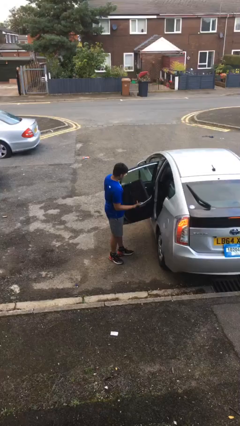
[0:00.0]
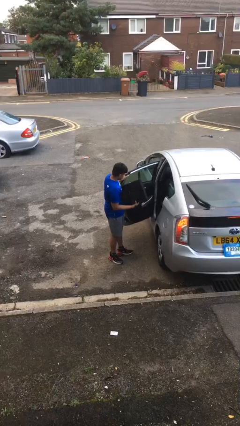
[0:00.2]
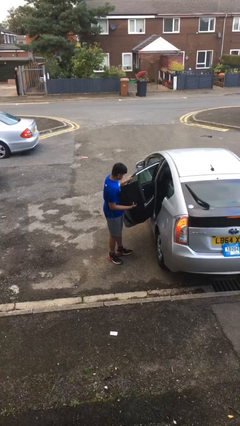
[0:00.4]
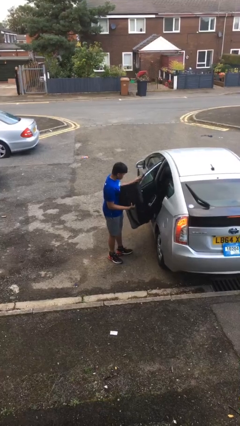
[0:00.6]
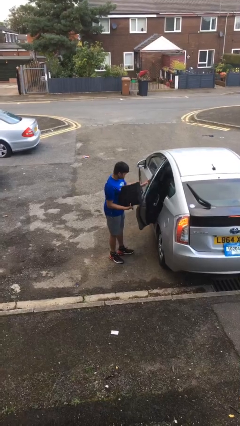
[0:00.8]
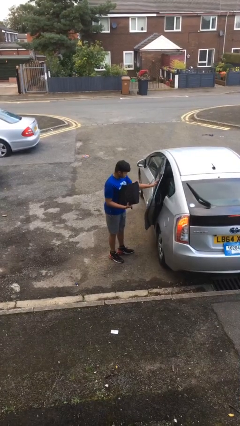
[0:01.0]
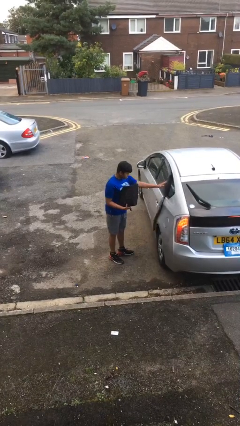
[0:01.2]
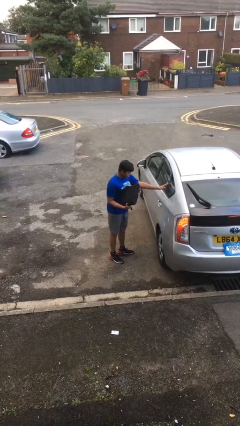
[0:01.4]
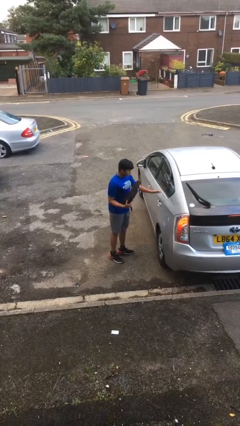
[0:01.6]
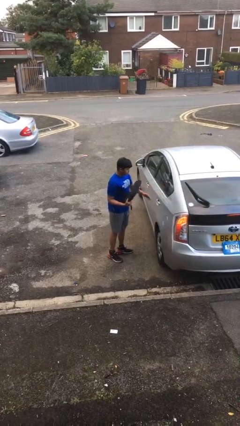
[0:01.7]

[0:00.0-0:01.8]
person closes car door

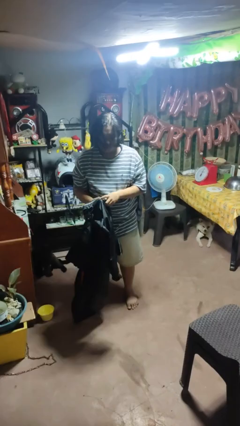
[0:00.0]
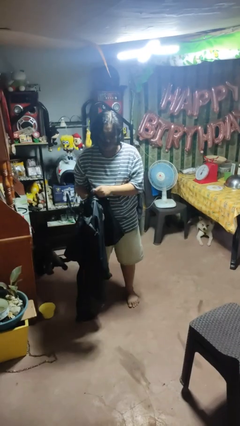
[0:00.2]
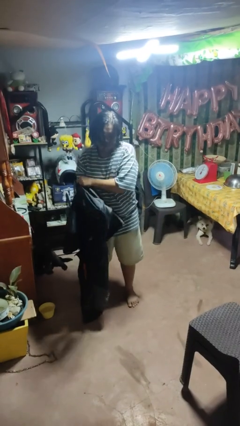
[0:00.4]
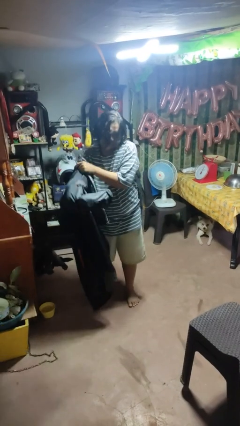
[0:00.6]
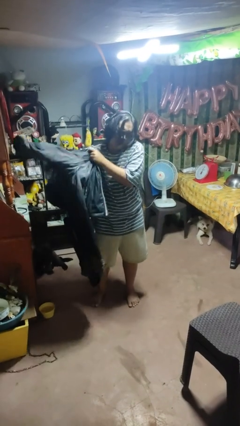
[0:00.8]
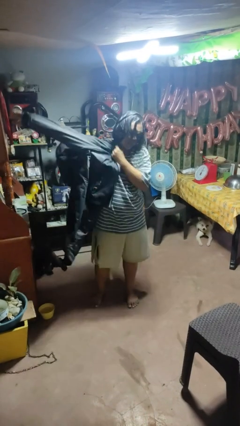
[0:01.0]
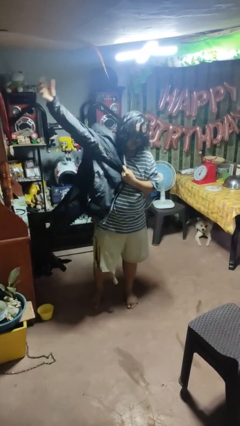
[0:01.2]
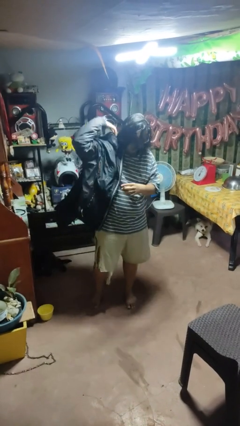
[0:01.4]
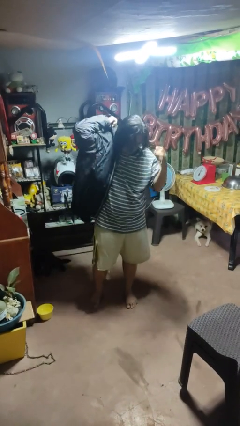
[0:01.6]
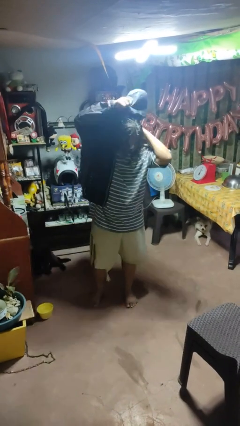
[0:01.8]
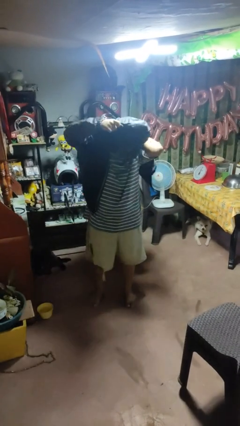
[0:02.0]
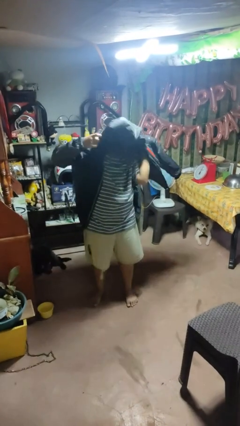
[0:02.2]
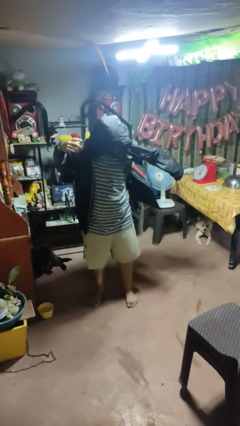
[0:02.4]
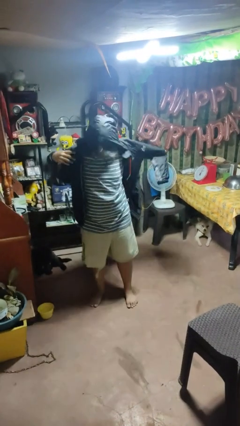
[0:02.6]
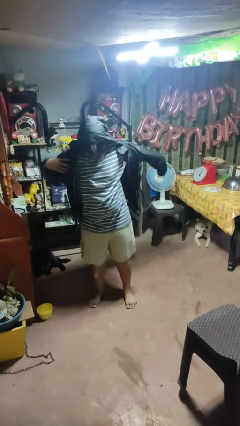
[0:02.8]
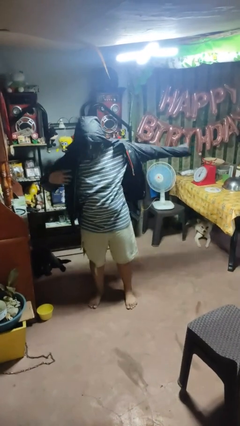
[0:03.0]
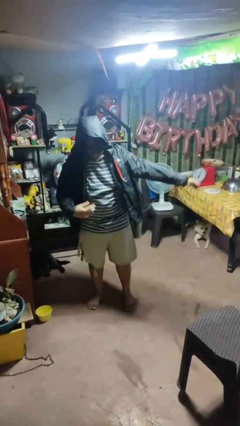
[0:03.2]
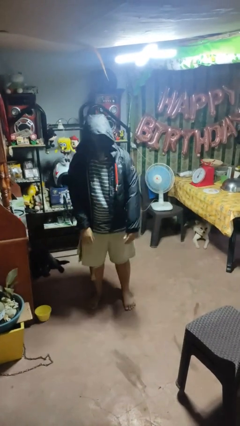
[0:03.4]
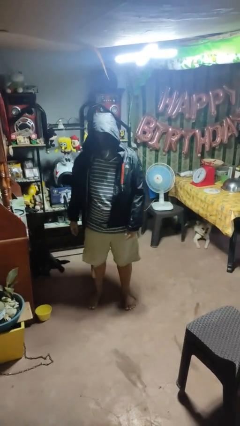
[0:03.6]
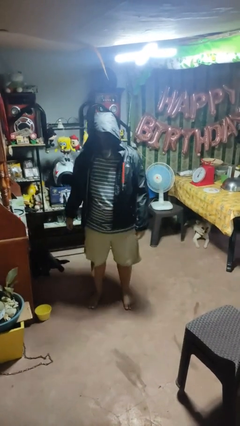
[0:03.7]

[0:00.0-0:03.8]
person puts on hoodie

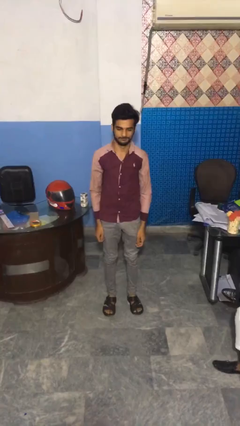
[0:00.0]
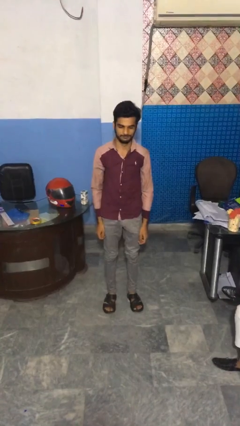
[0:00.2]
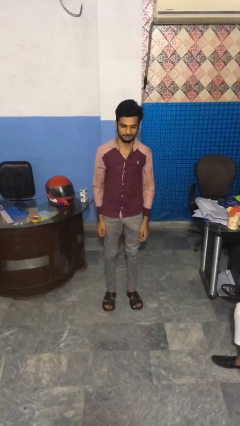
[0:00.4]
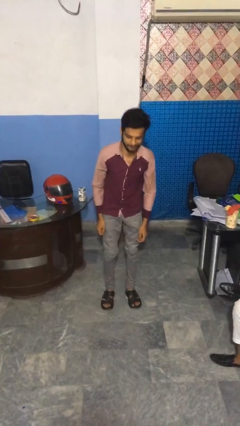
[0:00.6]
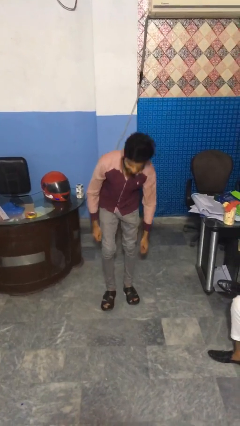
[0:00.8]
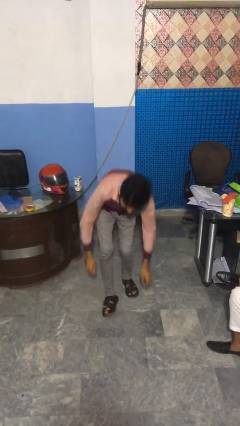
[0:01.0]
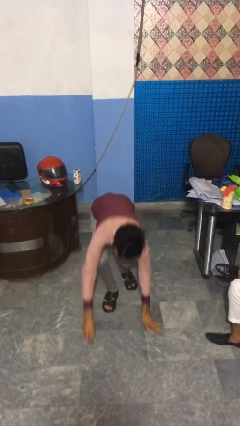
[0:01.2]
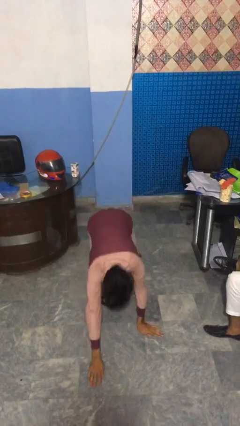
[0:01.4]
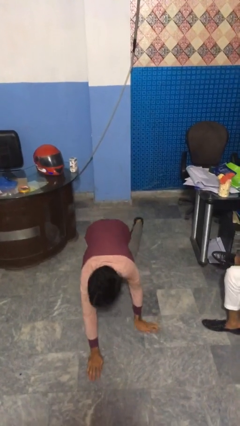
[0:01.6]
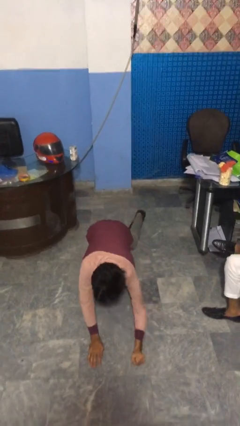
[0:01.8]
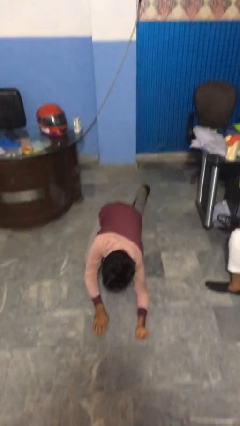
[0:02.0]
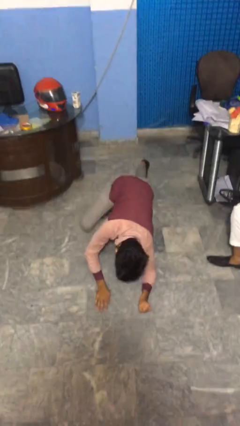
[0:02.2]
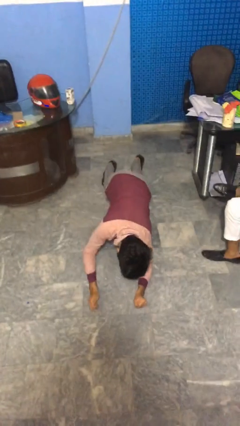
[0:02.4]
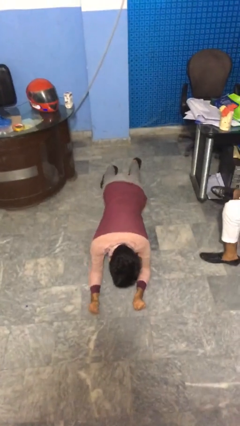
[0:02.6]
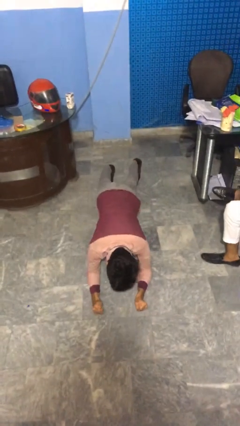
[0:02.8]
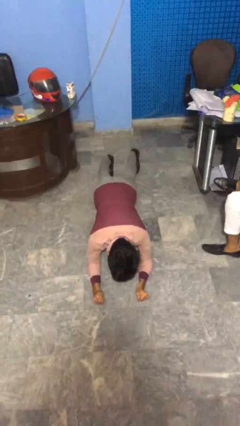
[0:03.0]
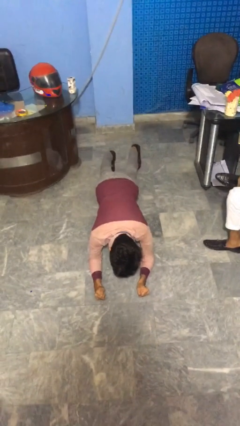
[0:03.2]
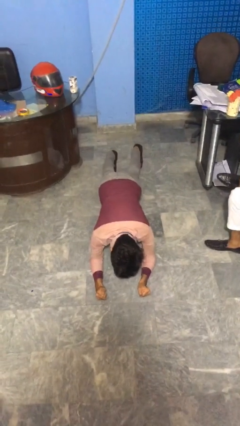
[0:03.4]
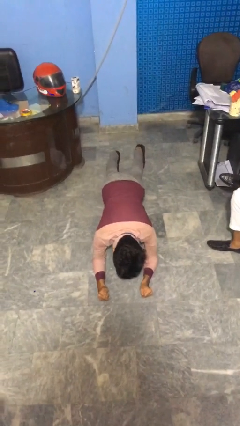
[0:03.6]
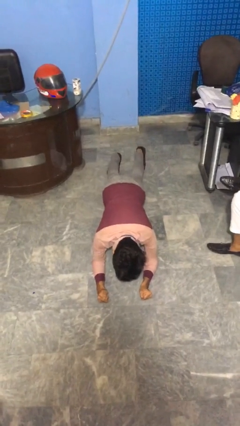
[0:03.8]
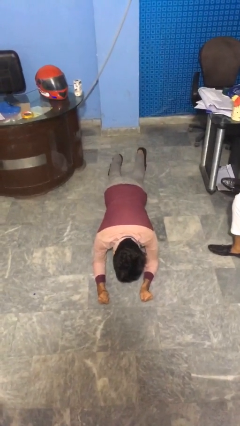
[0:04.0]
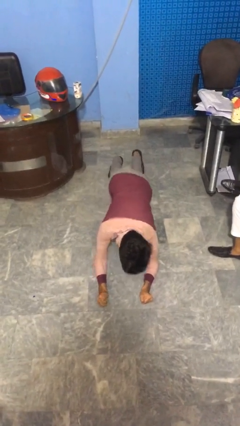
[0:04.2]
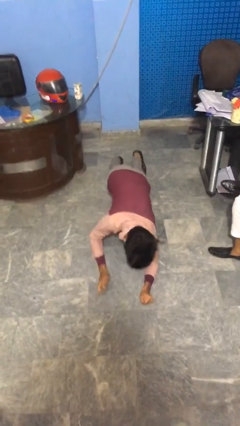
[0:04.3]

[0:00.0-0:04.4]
person exercises with plank

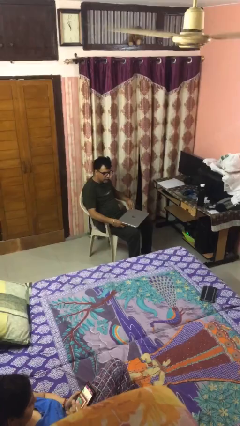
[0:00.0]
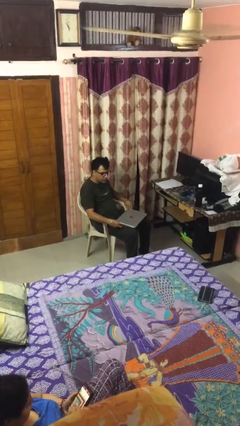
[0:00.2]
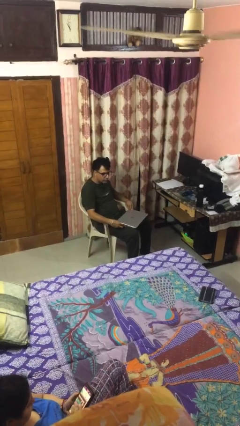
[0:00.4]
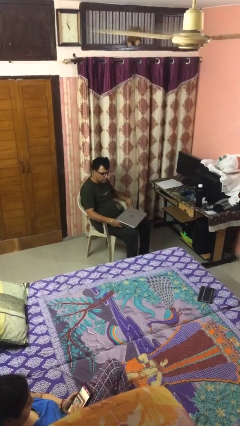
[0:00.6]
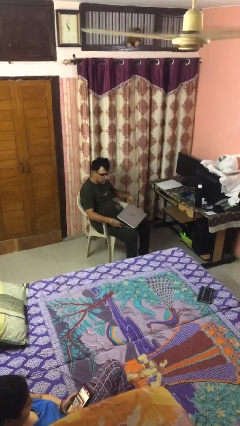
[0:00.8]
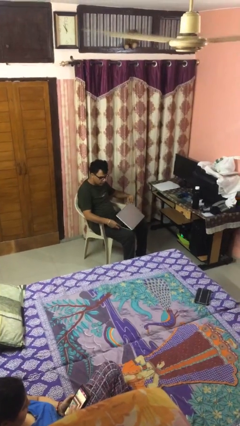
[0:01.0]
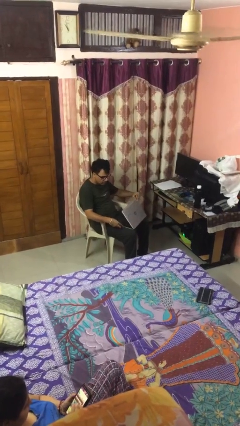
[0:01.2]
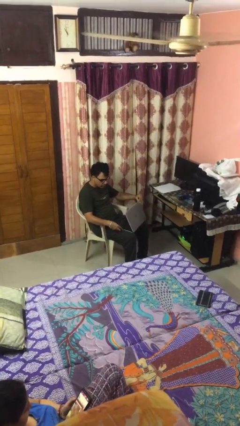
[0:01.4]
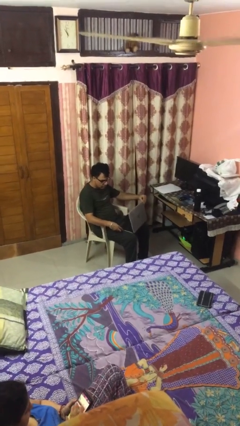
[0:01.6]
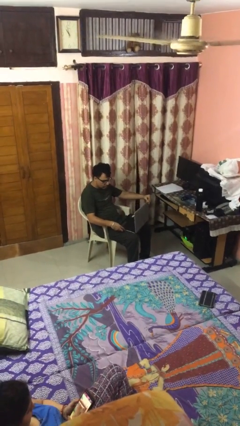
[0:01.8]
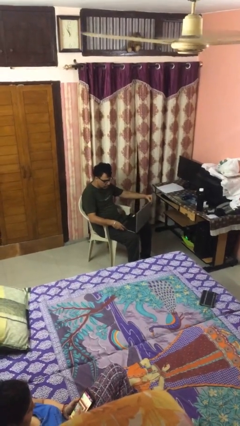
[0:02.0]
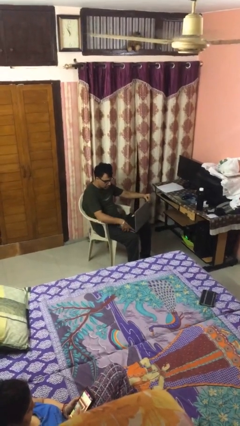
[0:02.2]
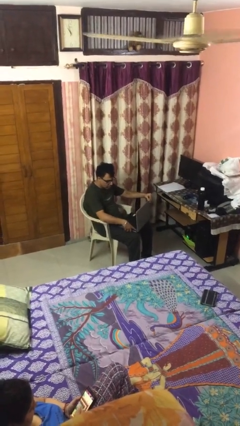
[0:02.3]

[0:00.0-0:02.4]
person opens laptop

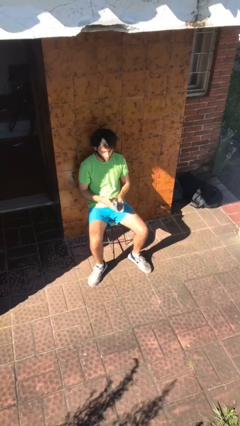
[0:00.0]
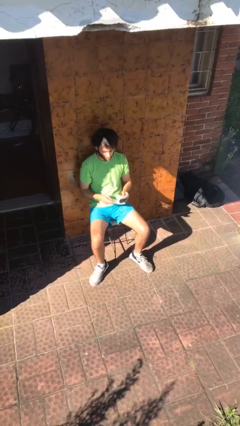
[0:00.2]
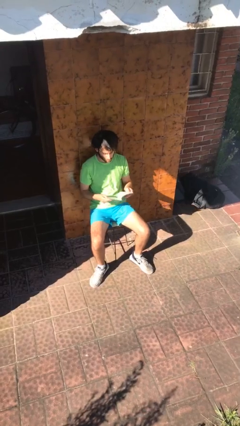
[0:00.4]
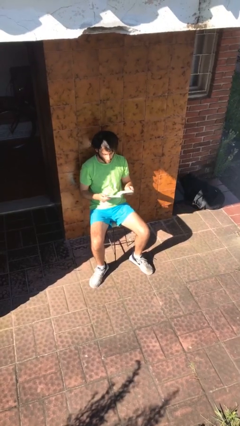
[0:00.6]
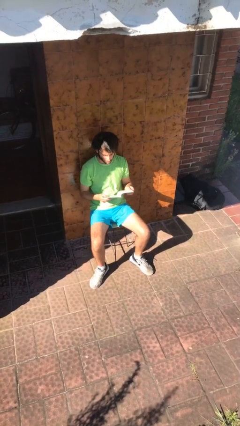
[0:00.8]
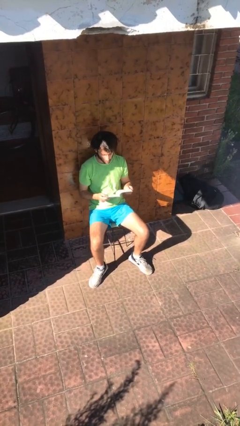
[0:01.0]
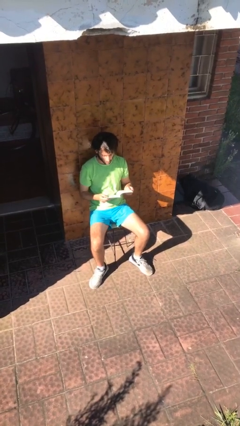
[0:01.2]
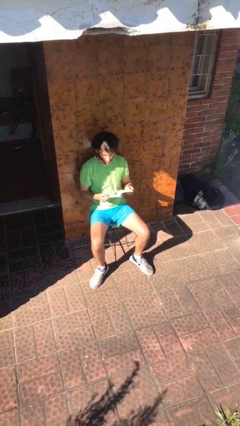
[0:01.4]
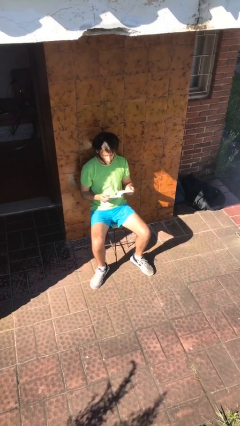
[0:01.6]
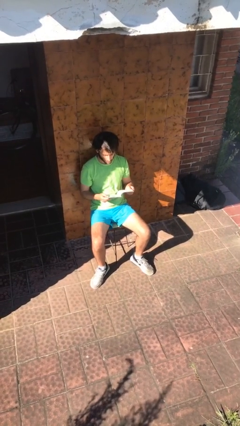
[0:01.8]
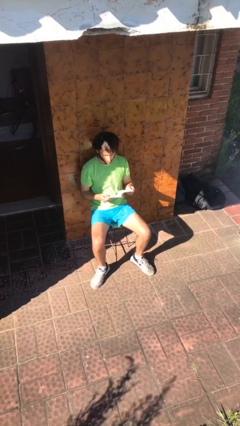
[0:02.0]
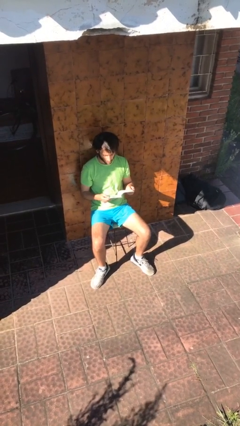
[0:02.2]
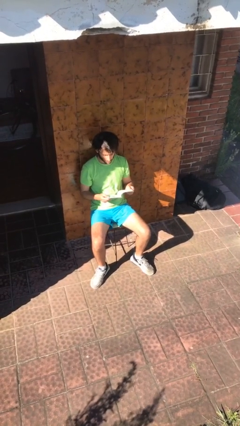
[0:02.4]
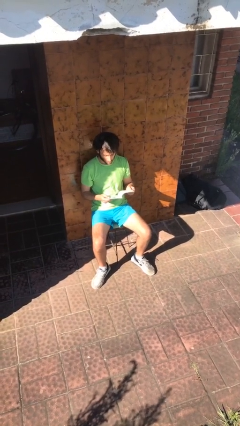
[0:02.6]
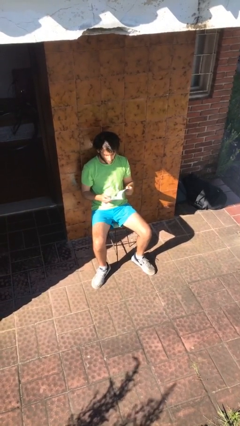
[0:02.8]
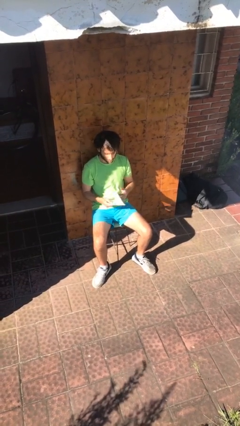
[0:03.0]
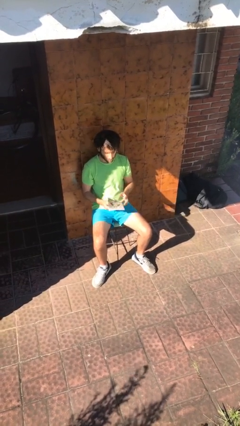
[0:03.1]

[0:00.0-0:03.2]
person reads document

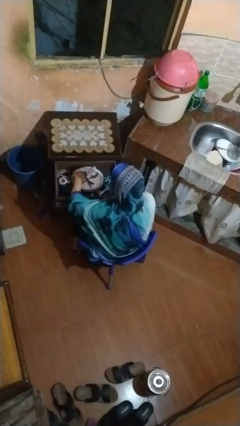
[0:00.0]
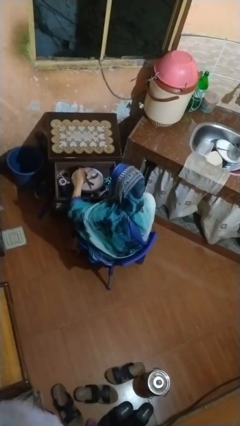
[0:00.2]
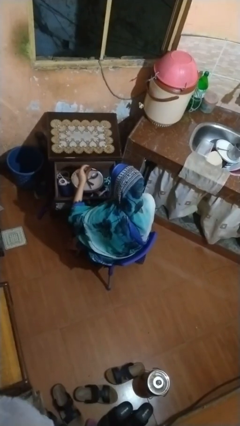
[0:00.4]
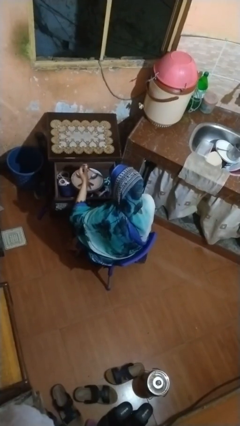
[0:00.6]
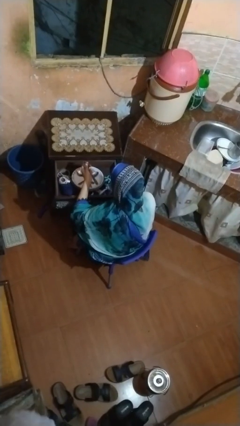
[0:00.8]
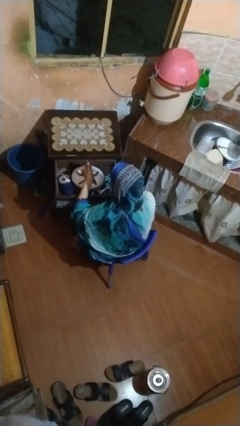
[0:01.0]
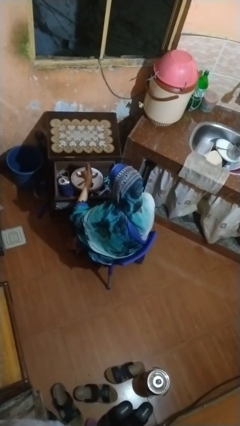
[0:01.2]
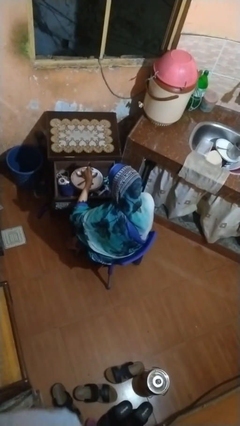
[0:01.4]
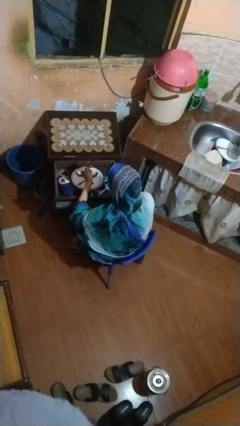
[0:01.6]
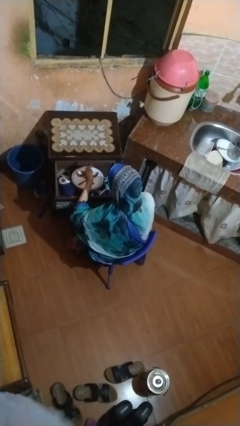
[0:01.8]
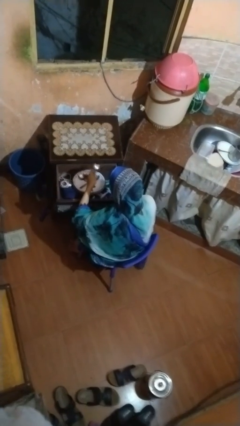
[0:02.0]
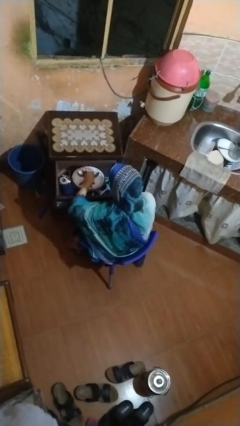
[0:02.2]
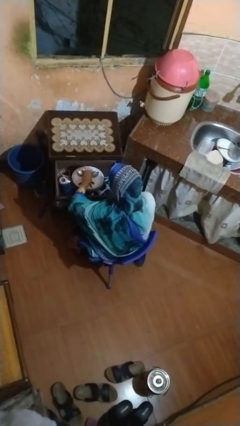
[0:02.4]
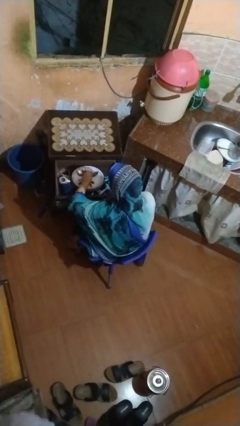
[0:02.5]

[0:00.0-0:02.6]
person takes object from kitchen drawer
